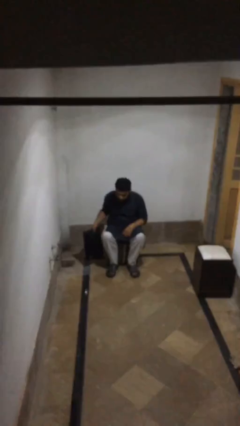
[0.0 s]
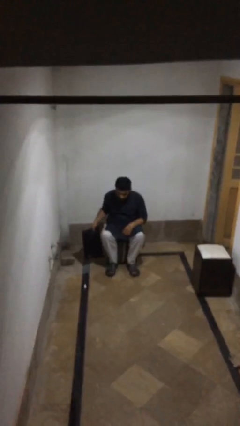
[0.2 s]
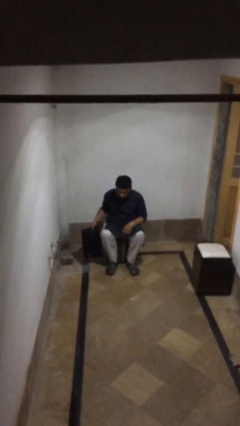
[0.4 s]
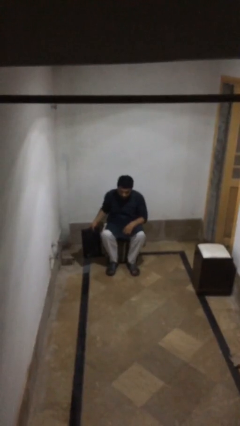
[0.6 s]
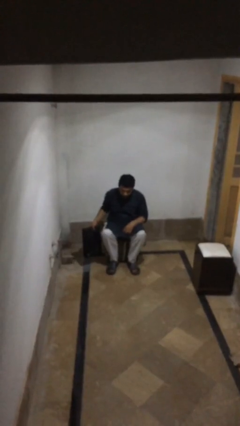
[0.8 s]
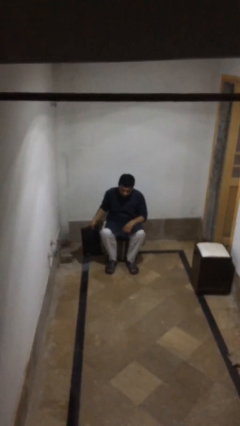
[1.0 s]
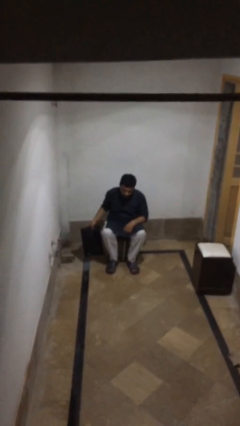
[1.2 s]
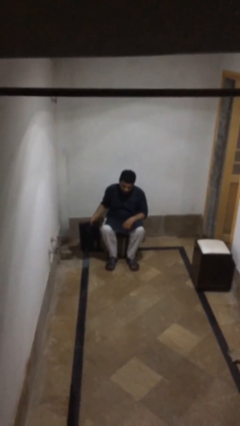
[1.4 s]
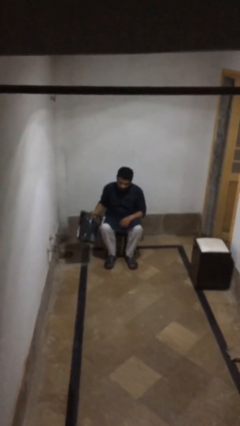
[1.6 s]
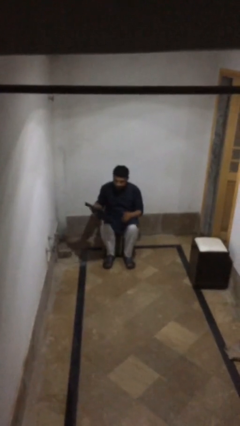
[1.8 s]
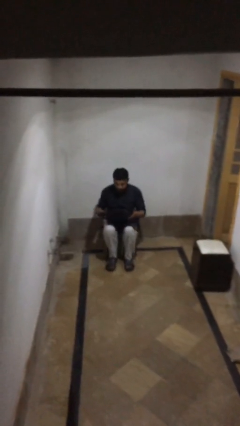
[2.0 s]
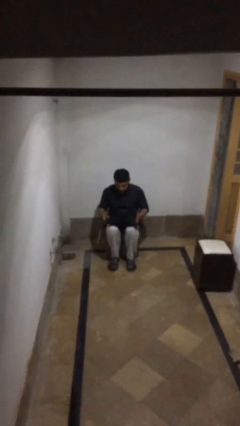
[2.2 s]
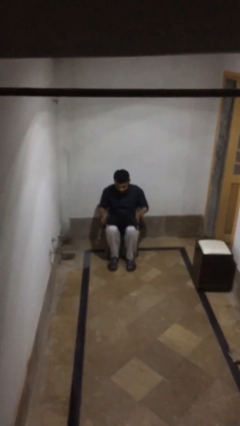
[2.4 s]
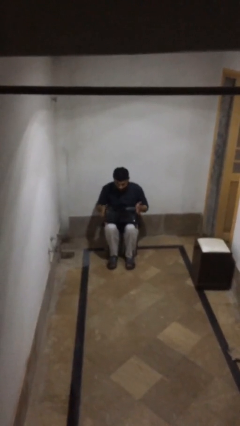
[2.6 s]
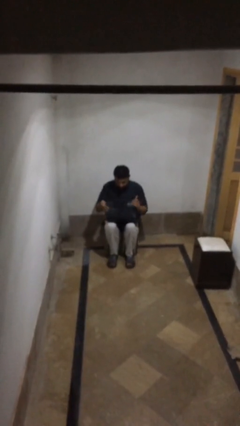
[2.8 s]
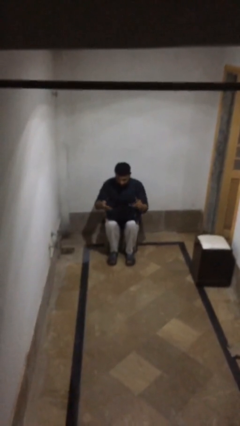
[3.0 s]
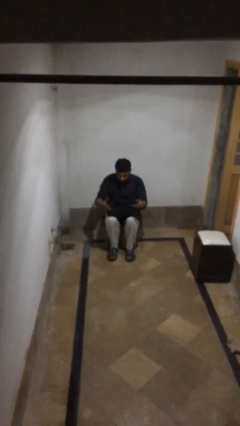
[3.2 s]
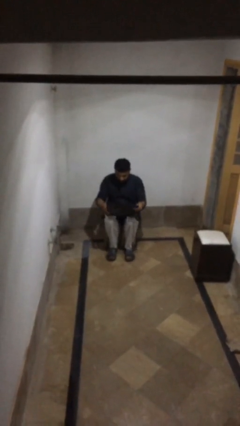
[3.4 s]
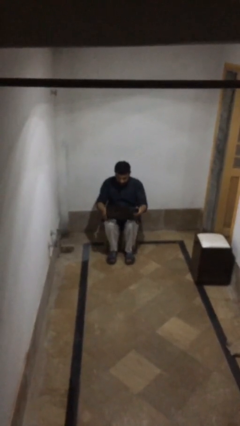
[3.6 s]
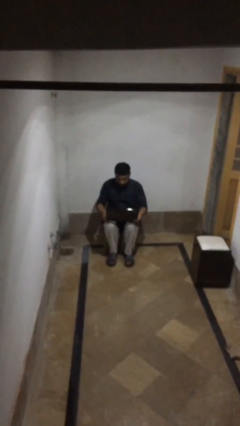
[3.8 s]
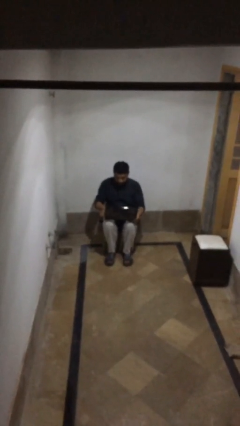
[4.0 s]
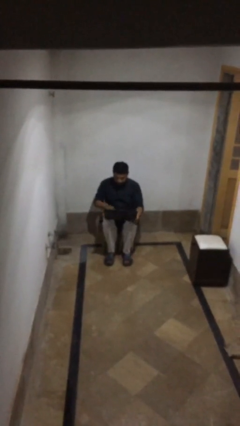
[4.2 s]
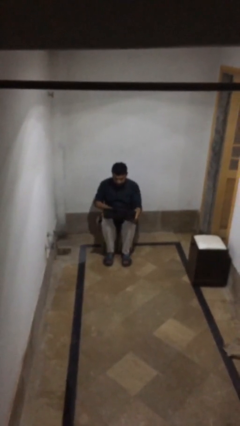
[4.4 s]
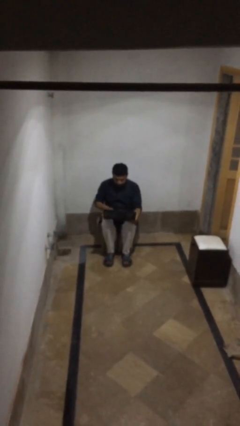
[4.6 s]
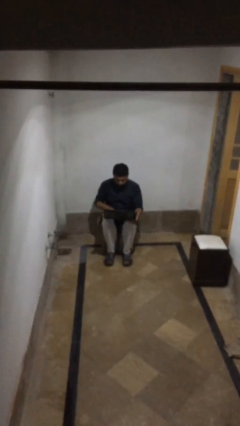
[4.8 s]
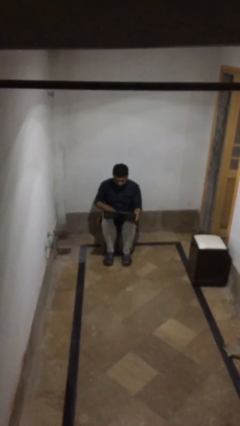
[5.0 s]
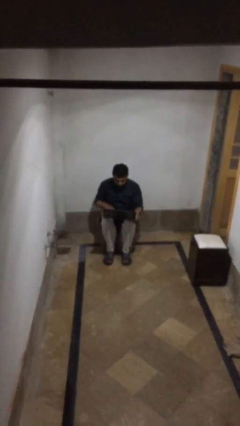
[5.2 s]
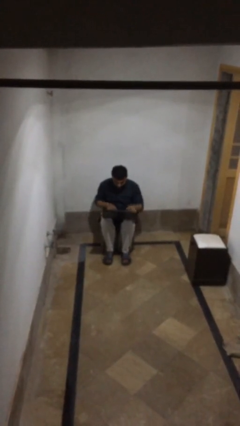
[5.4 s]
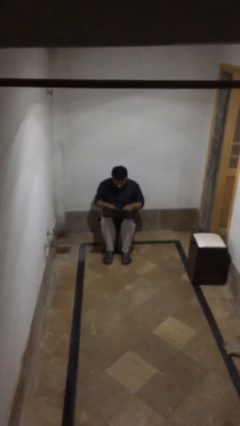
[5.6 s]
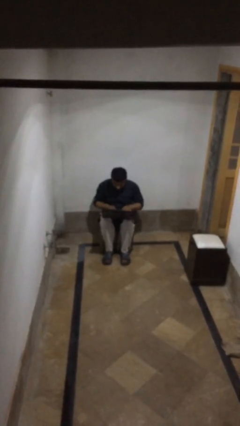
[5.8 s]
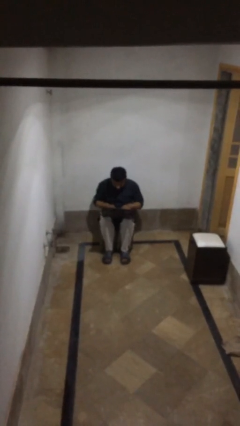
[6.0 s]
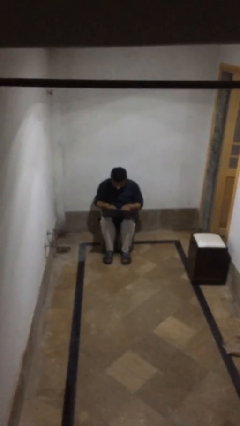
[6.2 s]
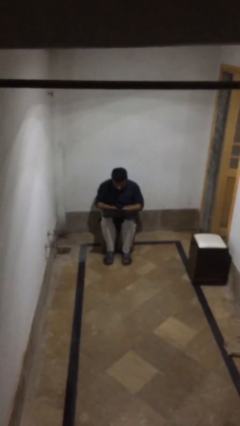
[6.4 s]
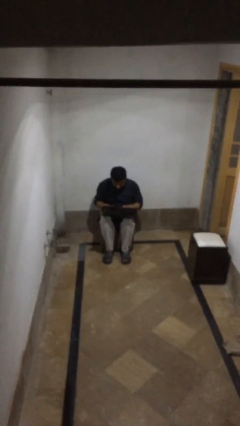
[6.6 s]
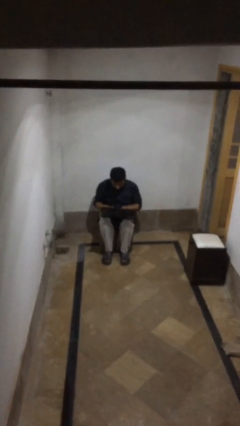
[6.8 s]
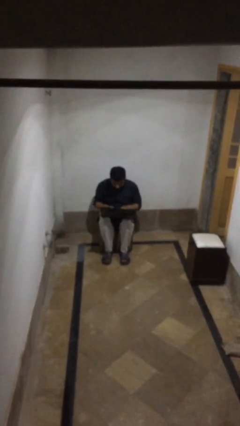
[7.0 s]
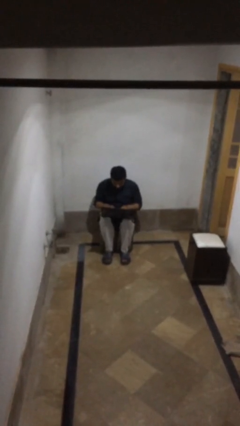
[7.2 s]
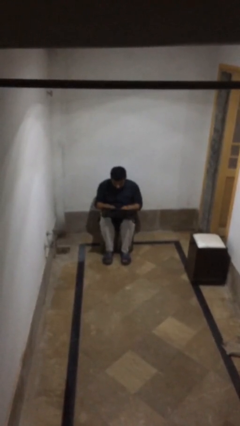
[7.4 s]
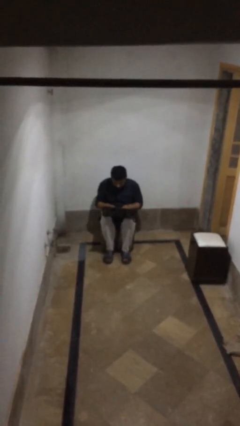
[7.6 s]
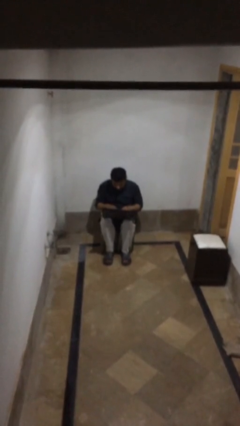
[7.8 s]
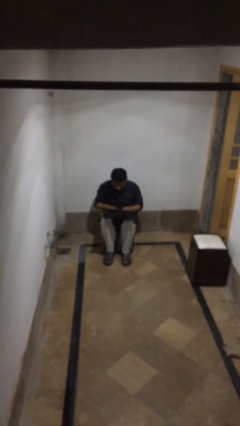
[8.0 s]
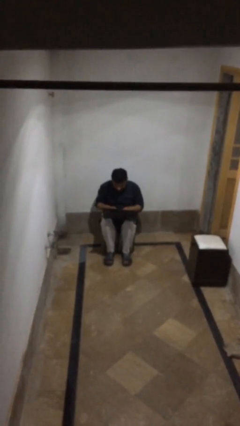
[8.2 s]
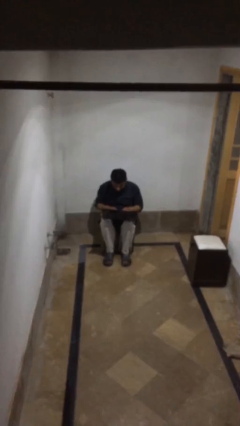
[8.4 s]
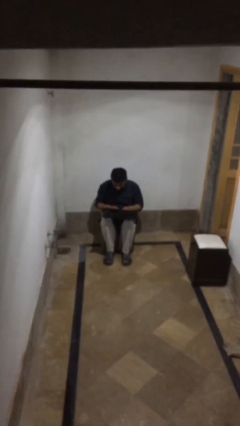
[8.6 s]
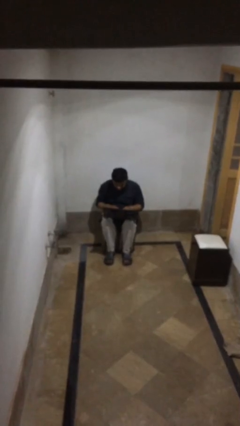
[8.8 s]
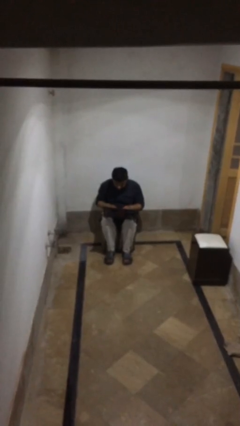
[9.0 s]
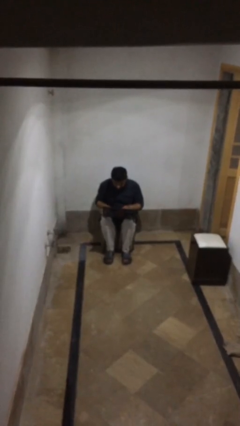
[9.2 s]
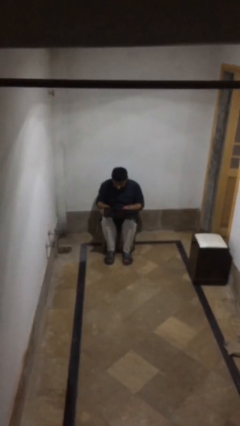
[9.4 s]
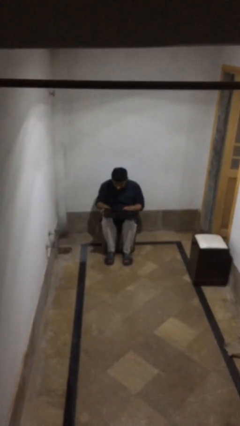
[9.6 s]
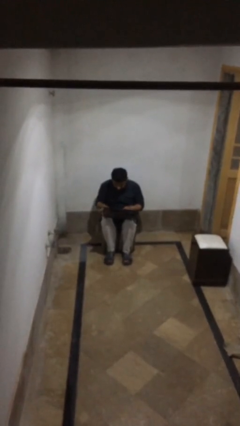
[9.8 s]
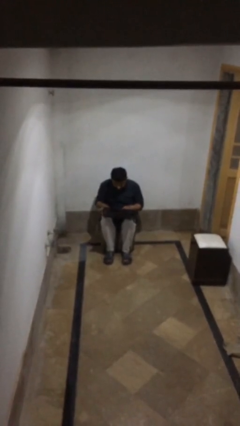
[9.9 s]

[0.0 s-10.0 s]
person interacts with laptop

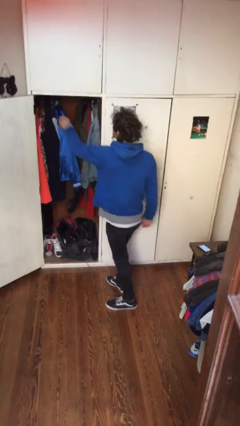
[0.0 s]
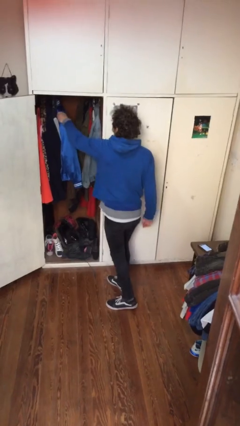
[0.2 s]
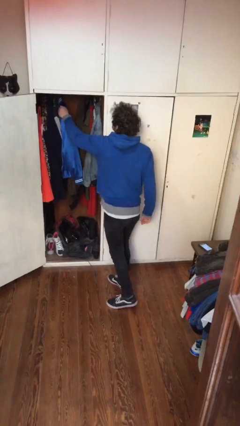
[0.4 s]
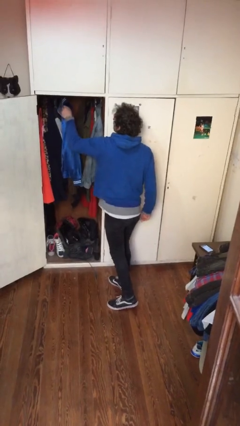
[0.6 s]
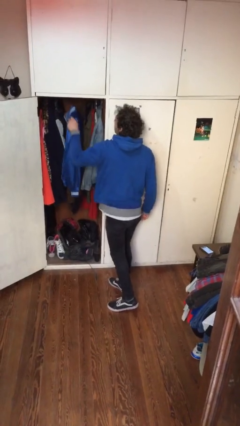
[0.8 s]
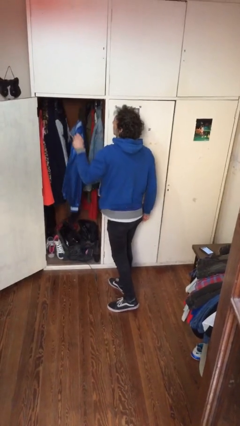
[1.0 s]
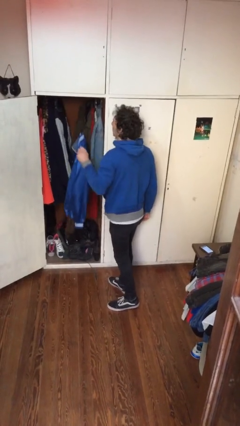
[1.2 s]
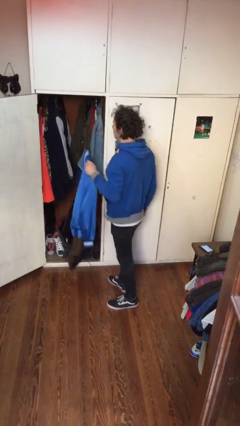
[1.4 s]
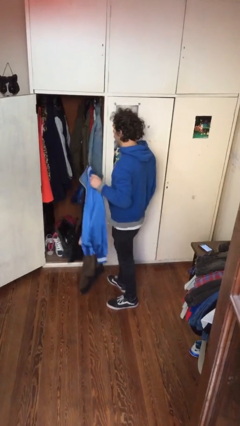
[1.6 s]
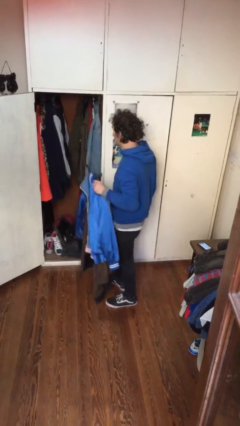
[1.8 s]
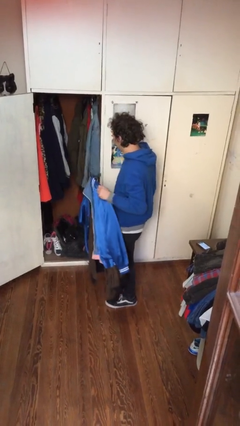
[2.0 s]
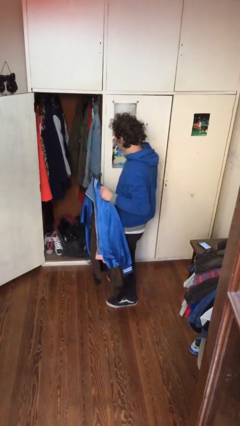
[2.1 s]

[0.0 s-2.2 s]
person takes clothes from closet

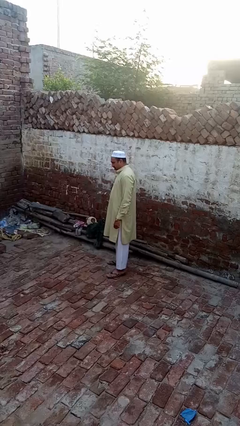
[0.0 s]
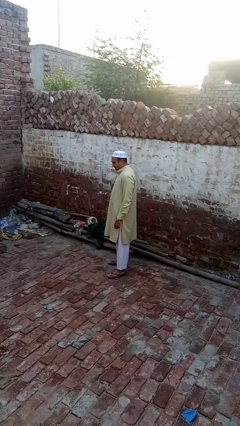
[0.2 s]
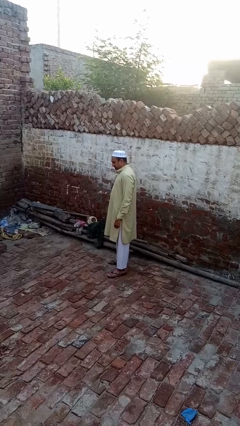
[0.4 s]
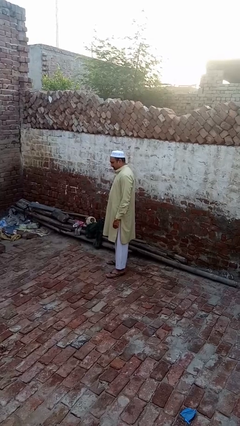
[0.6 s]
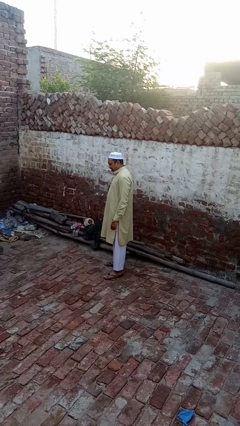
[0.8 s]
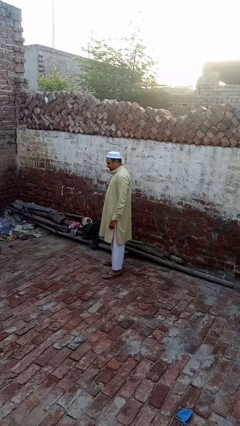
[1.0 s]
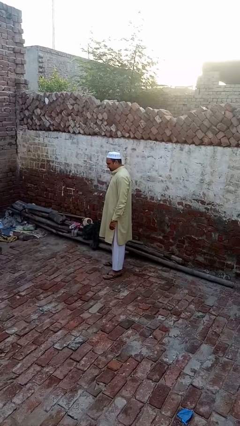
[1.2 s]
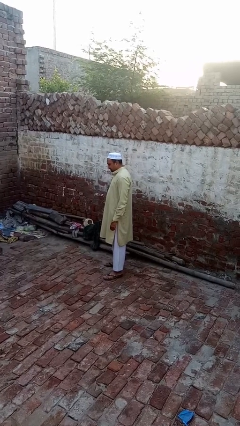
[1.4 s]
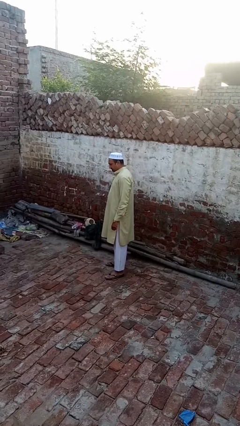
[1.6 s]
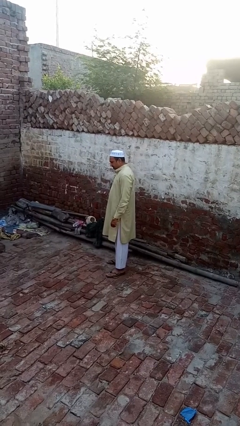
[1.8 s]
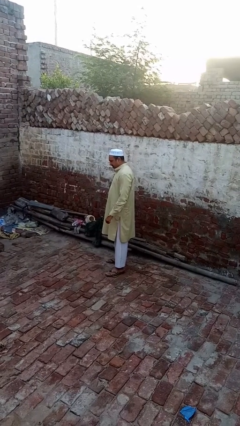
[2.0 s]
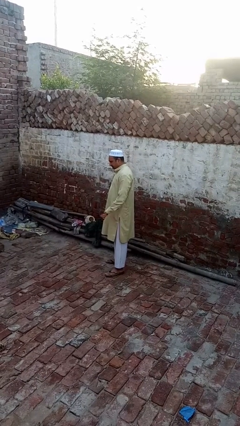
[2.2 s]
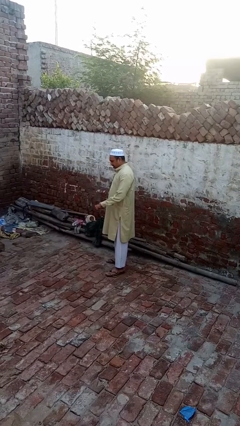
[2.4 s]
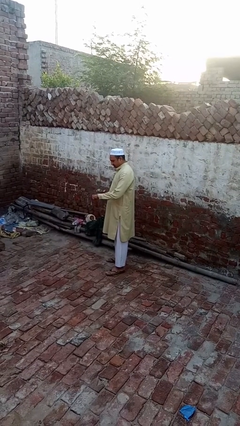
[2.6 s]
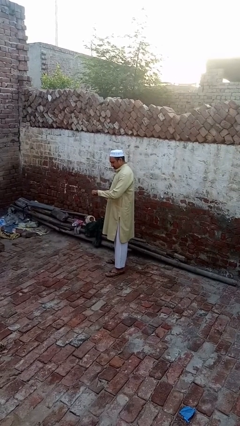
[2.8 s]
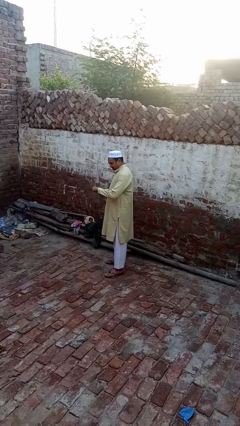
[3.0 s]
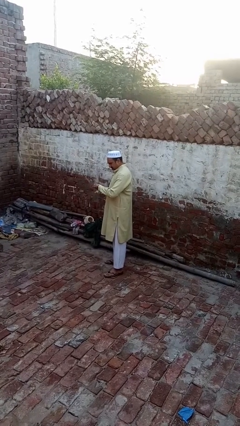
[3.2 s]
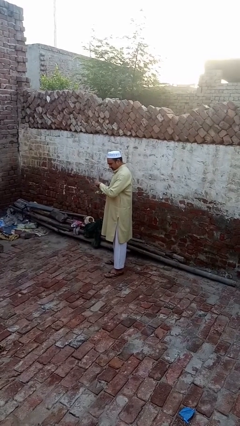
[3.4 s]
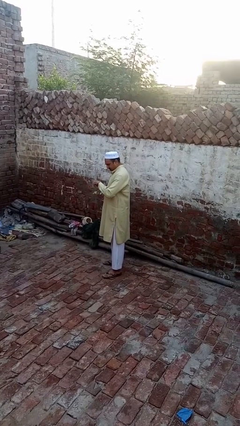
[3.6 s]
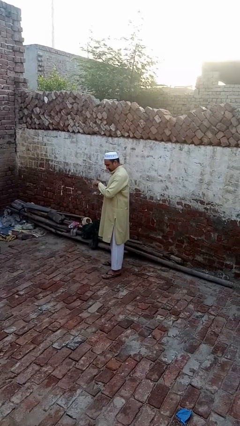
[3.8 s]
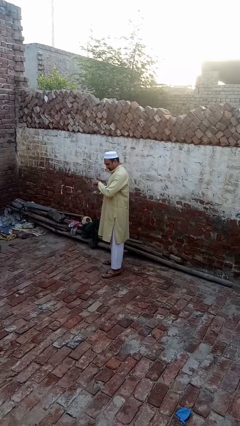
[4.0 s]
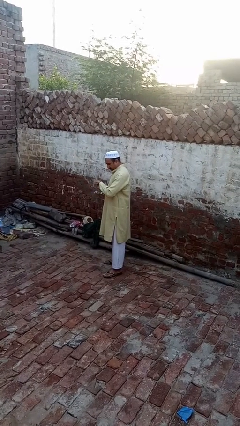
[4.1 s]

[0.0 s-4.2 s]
person looks at wristwatch

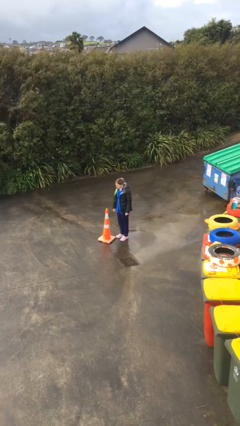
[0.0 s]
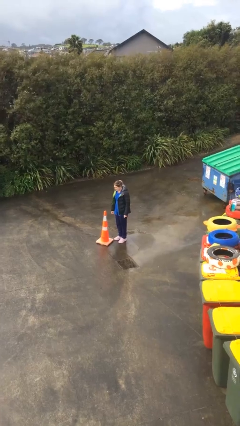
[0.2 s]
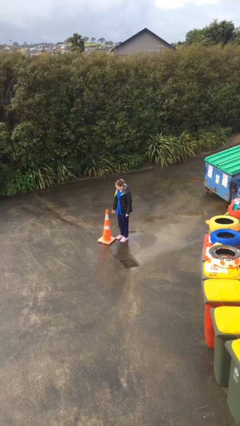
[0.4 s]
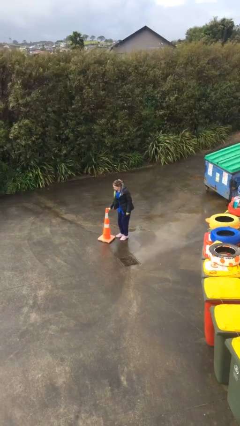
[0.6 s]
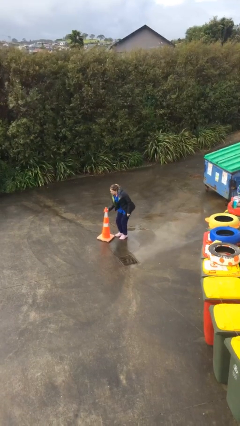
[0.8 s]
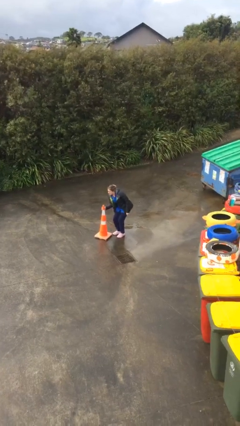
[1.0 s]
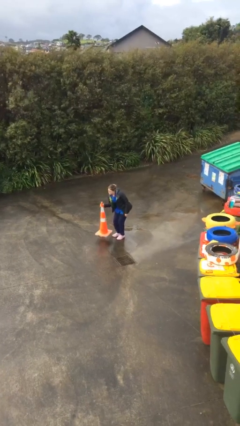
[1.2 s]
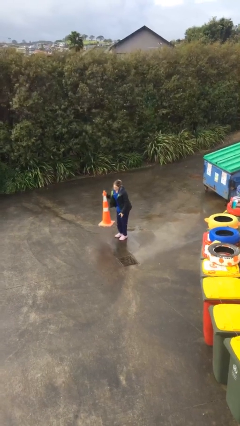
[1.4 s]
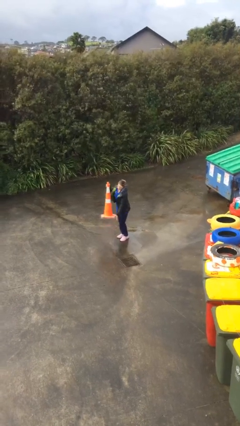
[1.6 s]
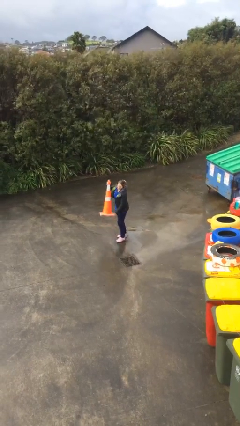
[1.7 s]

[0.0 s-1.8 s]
person picks up object from floor
